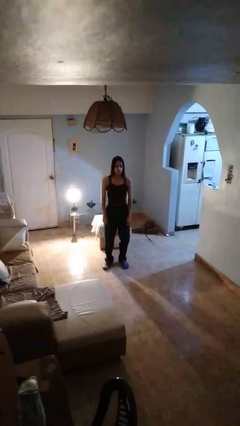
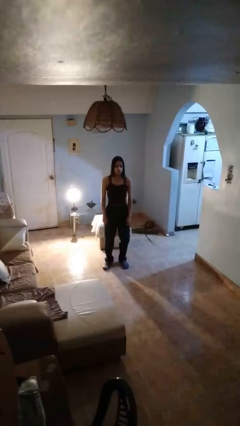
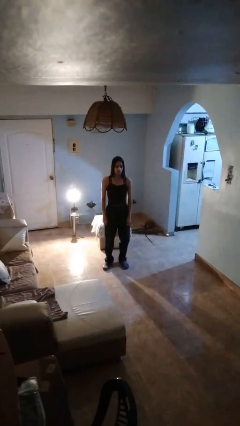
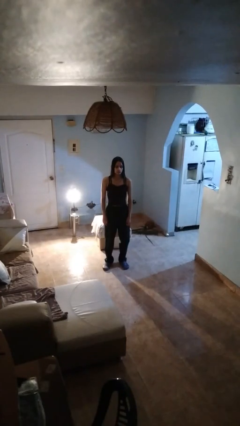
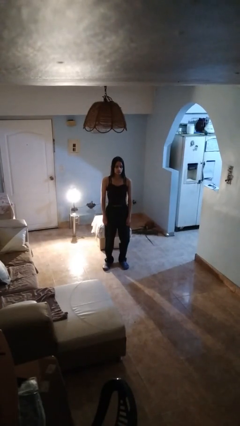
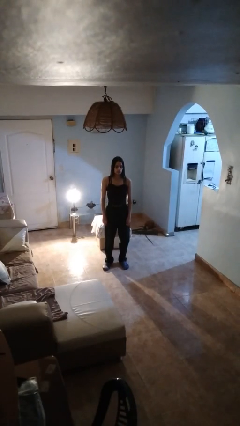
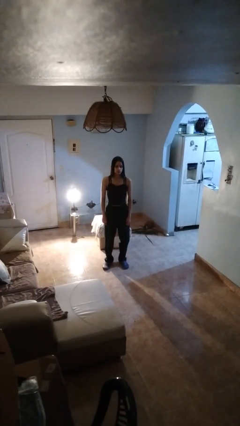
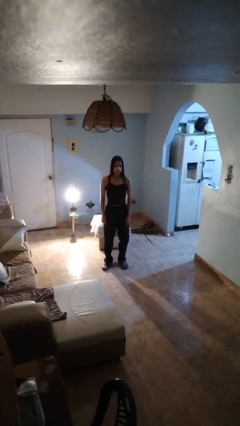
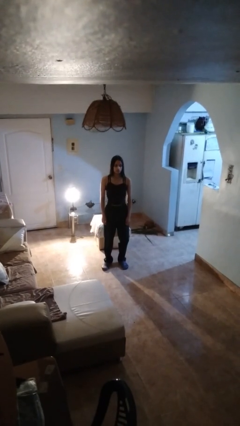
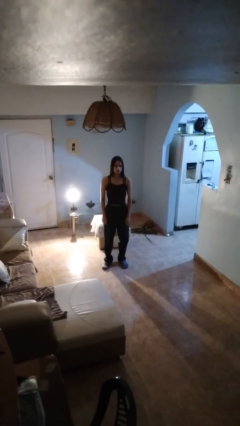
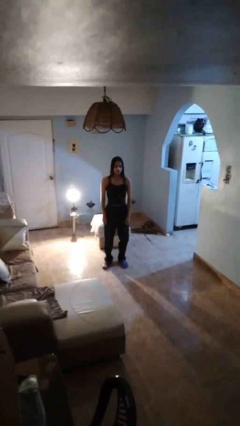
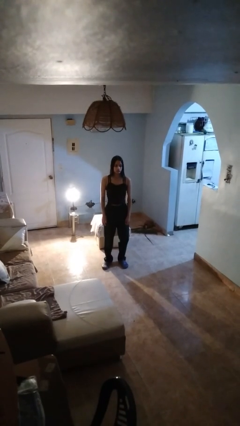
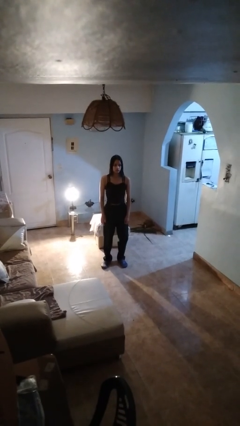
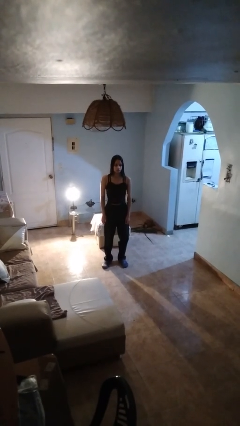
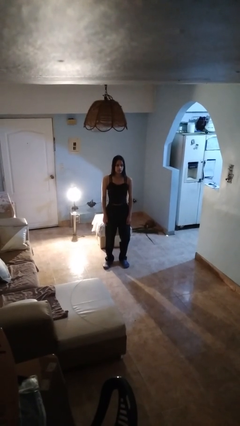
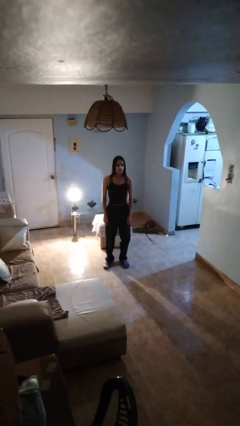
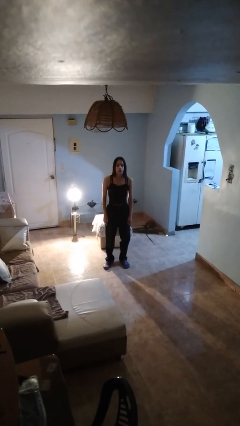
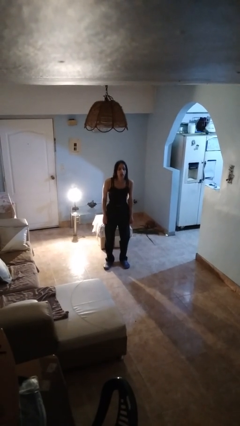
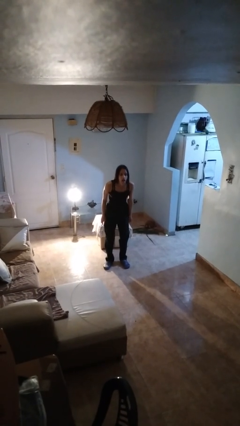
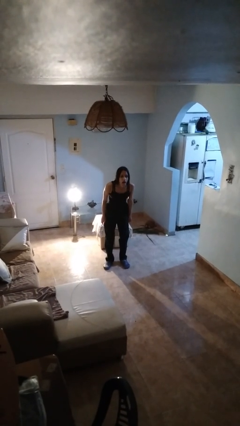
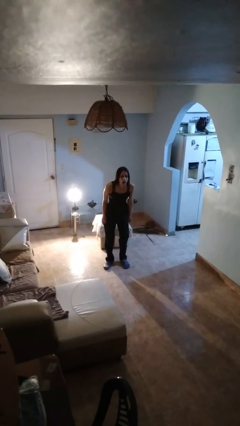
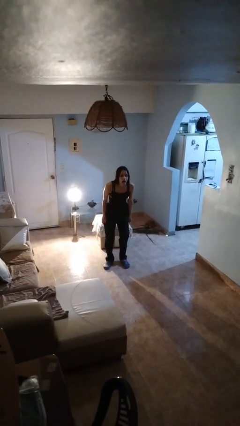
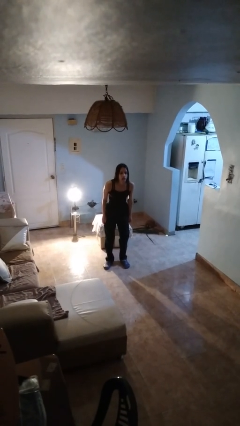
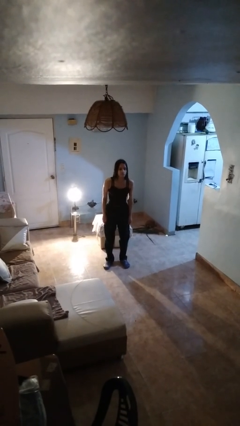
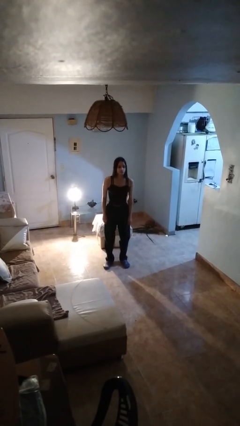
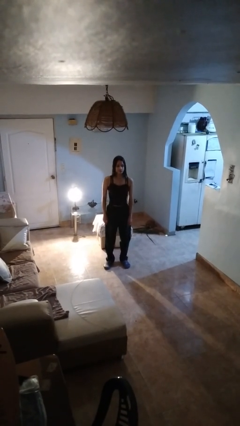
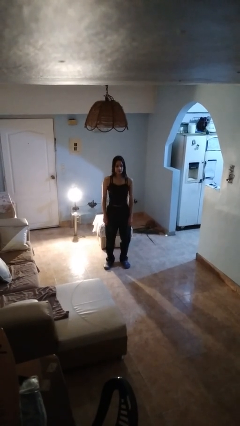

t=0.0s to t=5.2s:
person sticks out tongue

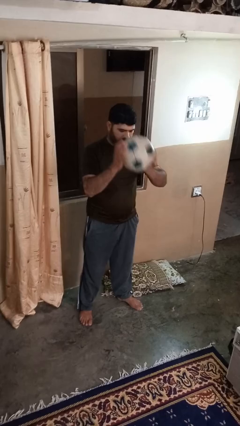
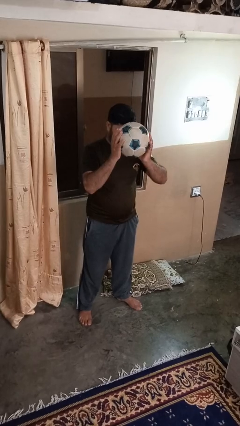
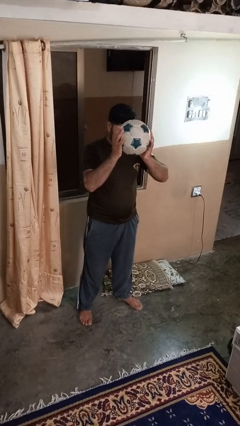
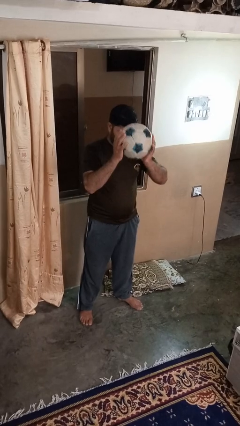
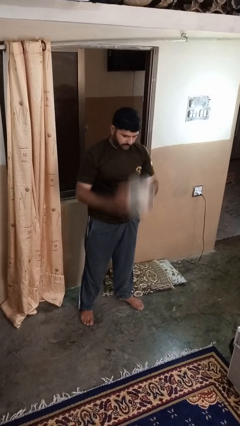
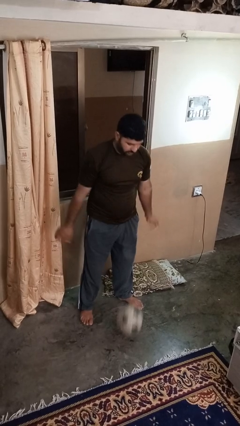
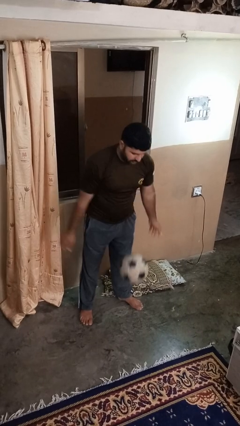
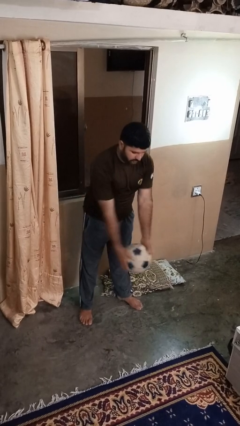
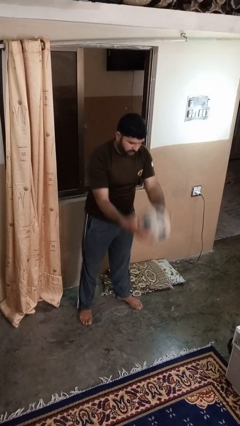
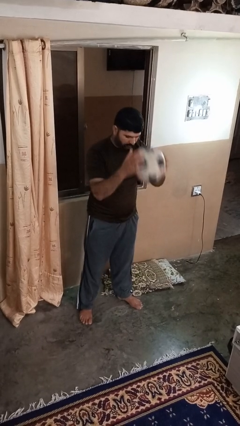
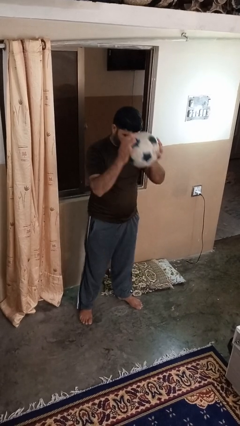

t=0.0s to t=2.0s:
person bounces ball on floor

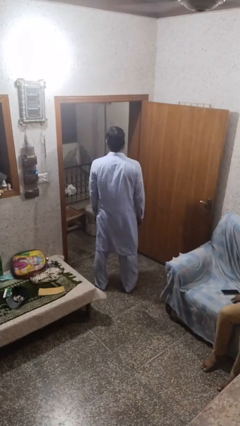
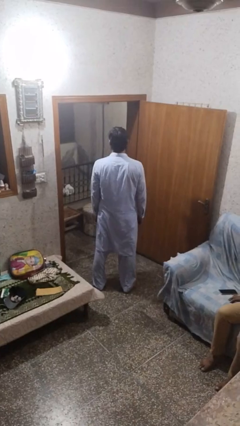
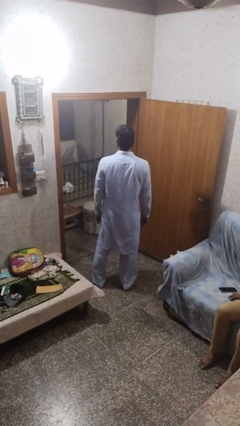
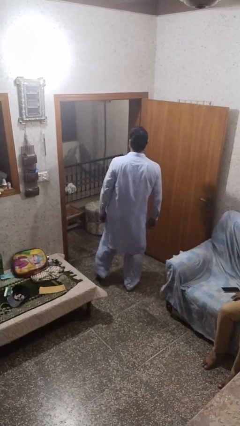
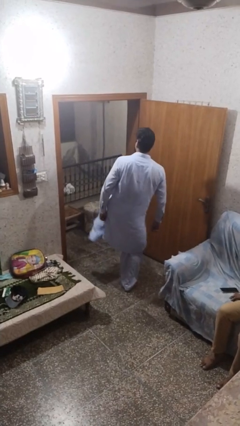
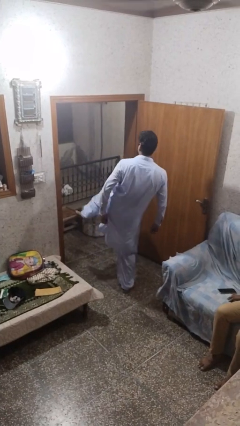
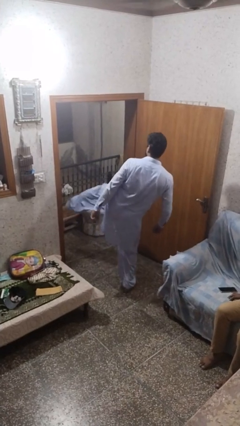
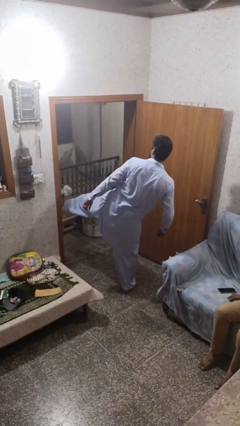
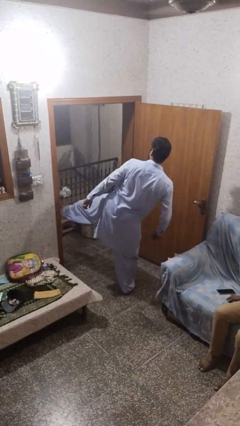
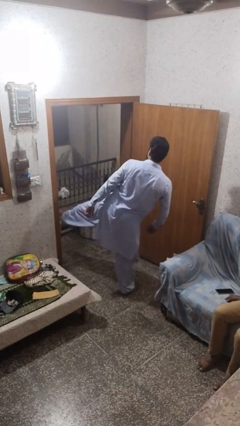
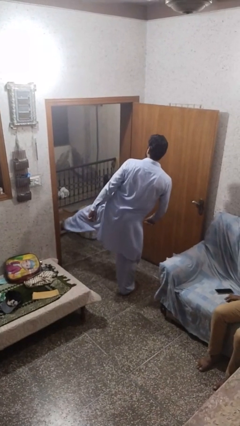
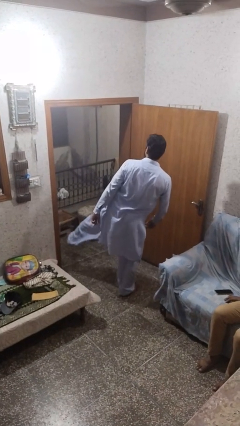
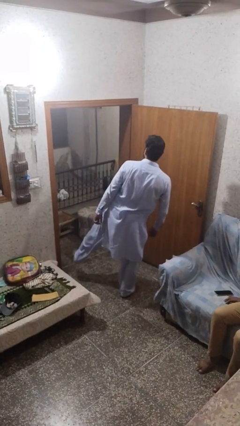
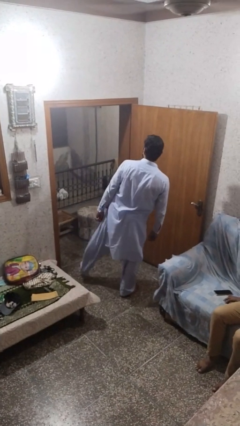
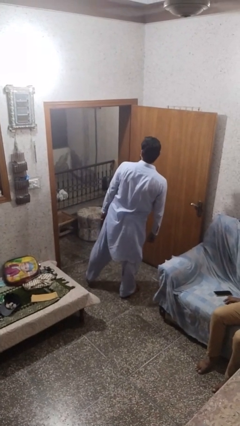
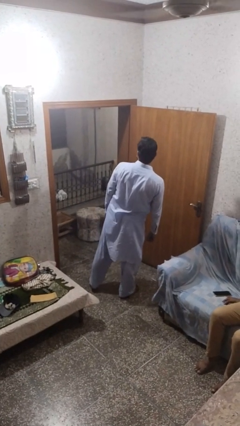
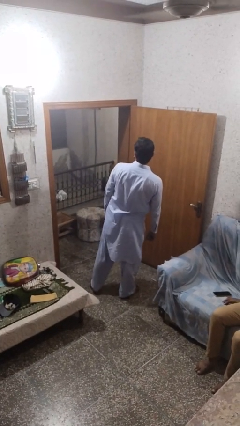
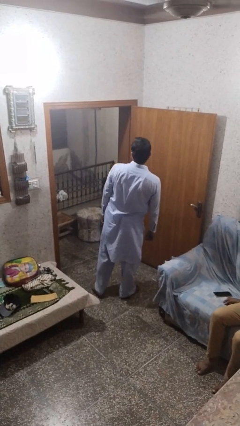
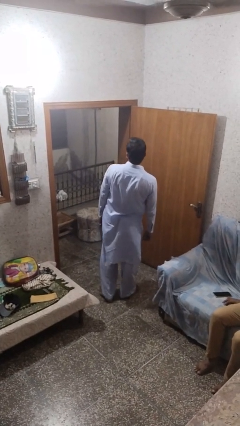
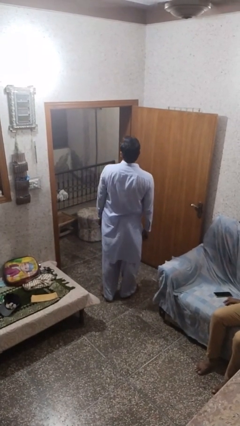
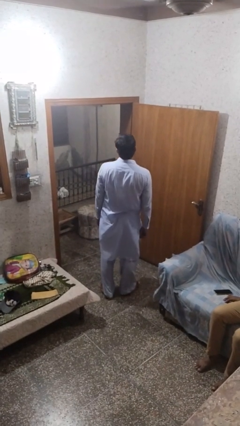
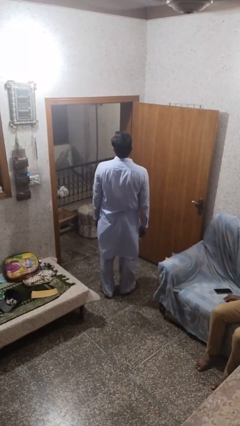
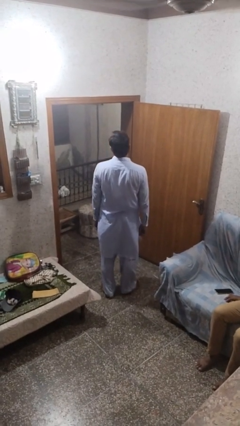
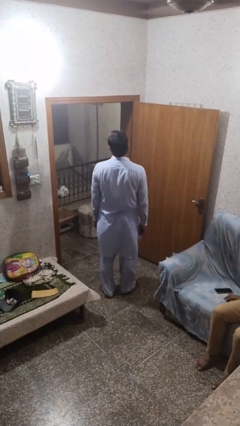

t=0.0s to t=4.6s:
person karate kicks

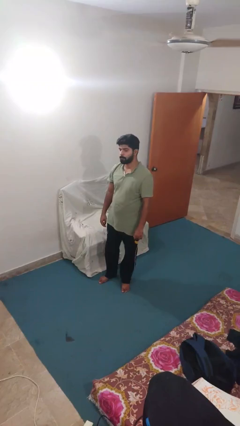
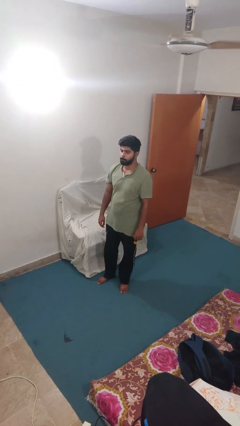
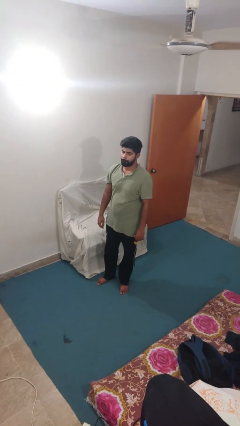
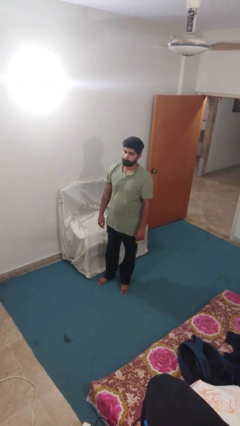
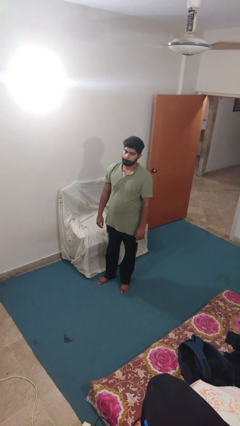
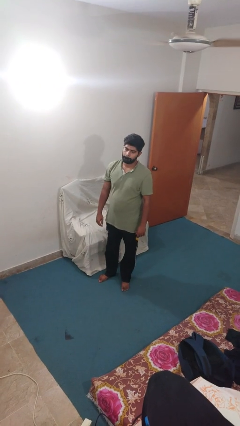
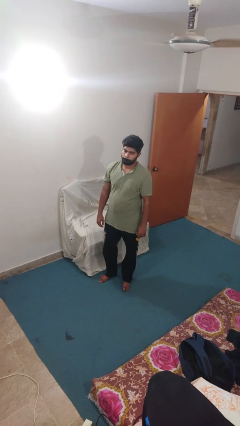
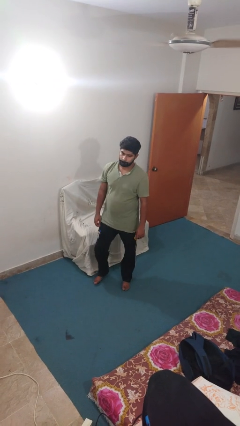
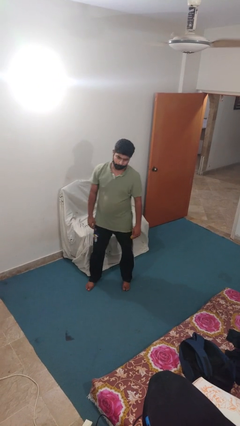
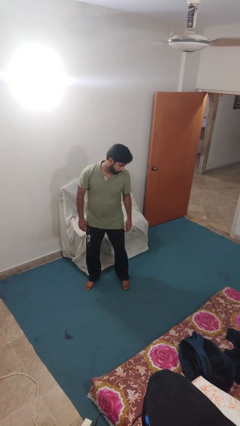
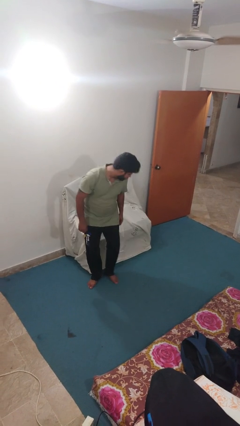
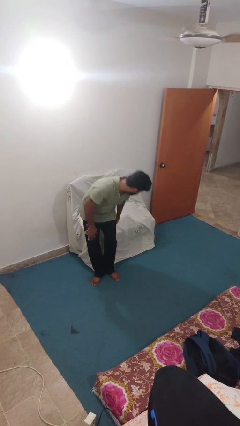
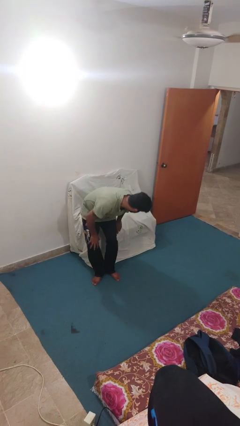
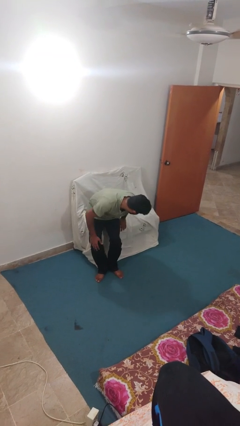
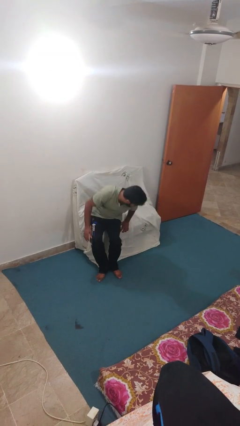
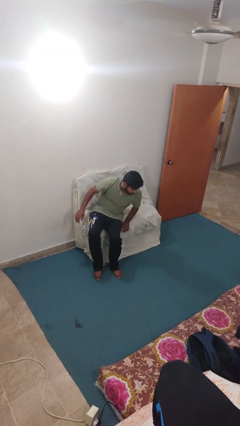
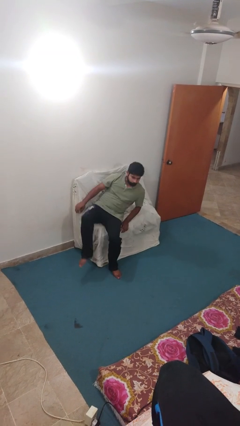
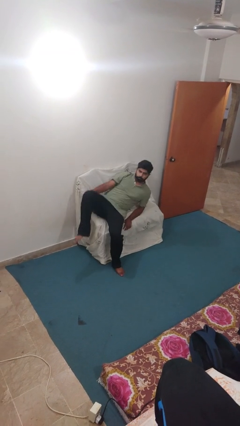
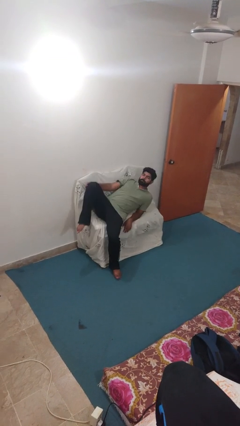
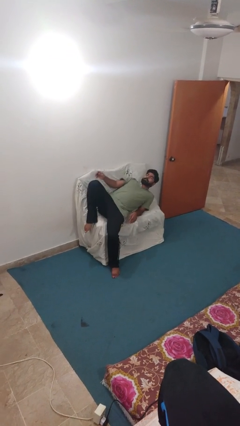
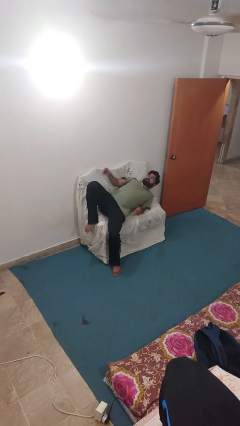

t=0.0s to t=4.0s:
person lies down on couch

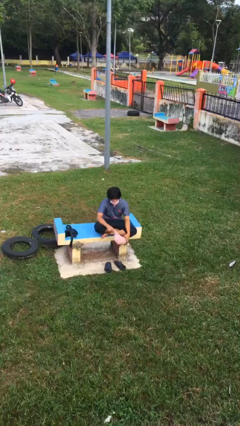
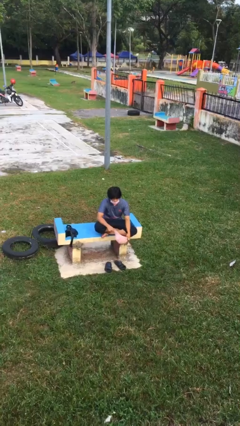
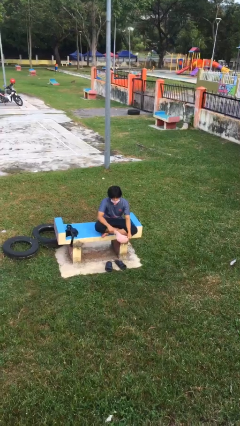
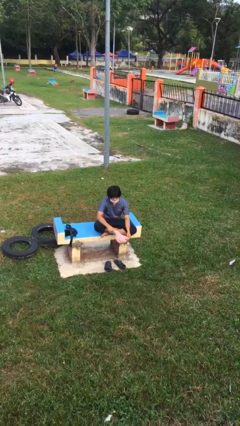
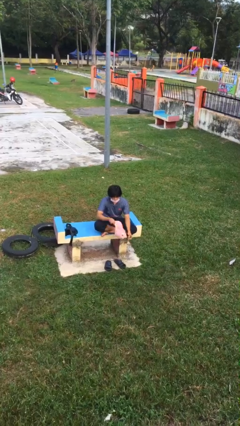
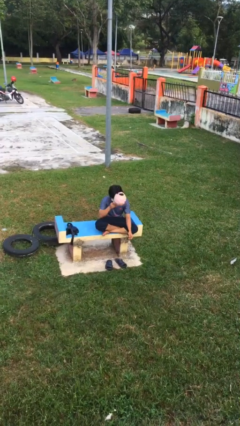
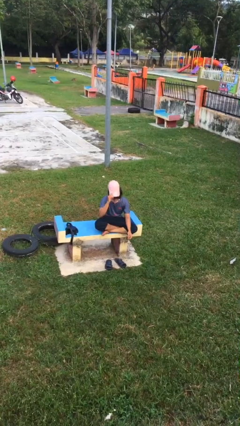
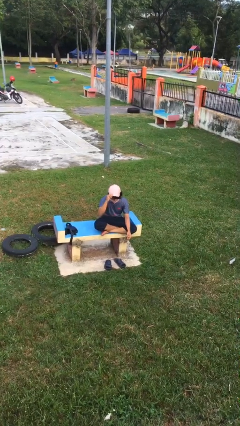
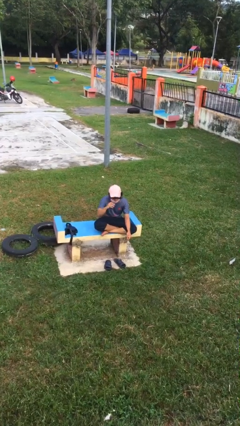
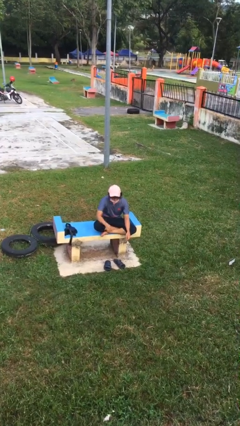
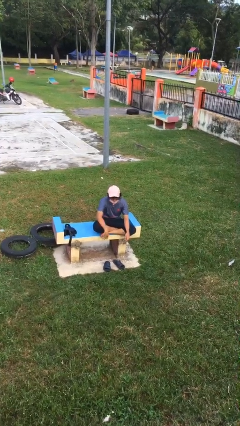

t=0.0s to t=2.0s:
person puts on hat
